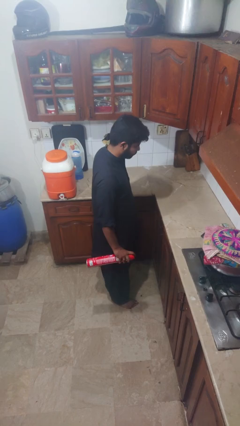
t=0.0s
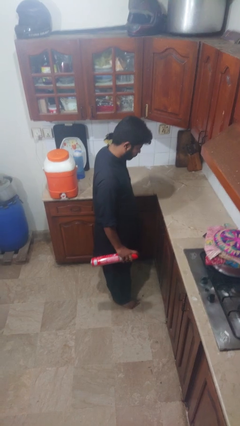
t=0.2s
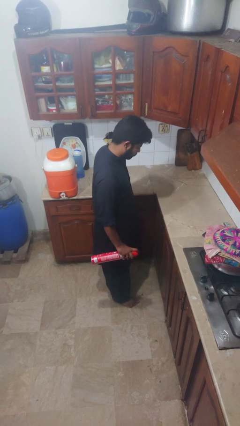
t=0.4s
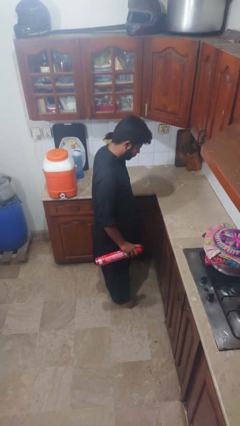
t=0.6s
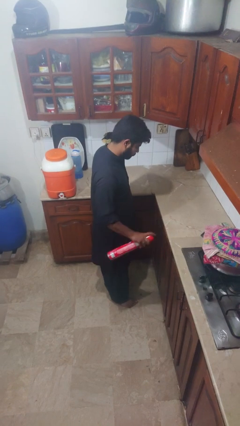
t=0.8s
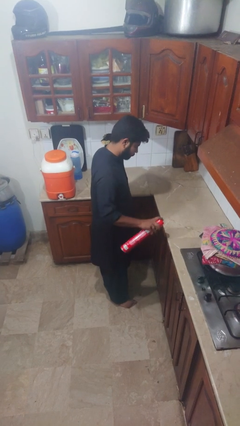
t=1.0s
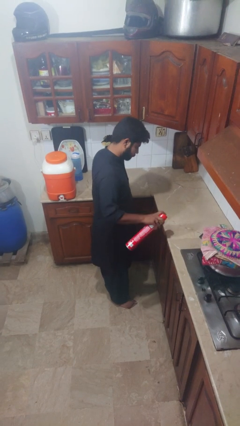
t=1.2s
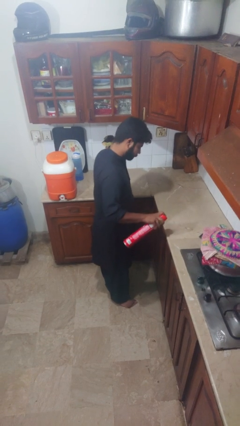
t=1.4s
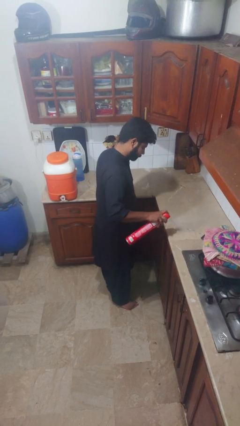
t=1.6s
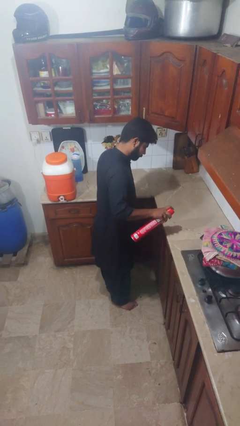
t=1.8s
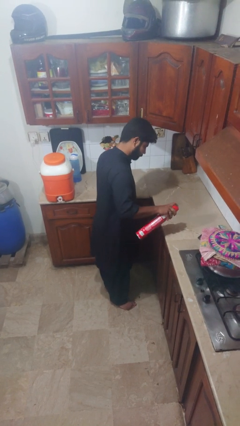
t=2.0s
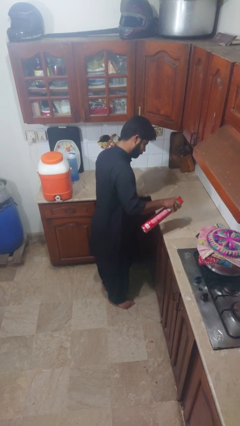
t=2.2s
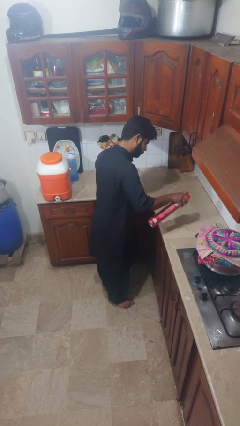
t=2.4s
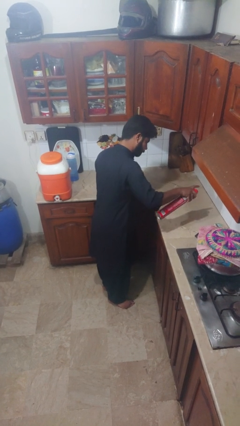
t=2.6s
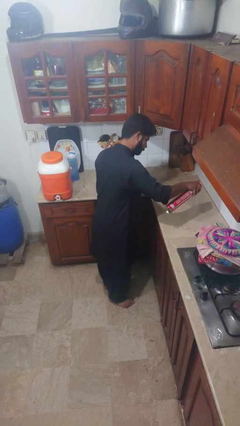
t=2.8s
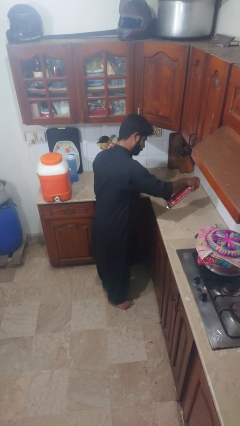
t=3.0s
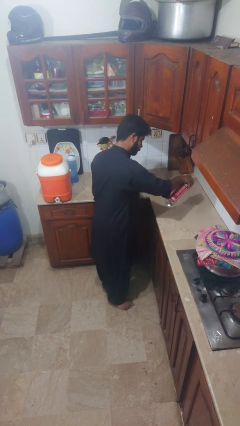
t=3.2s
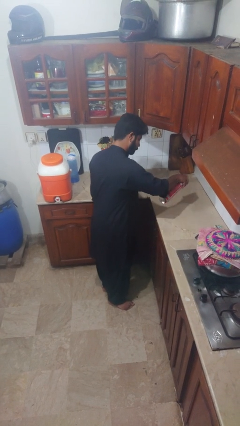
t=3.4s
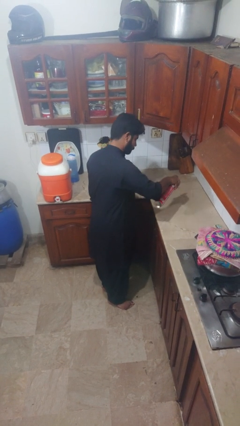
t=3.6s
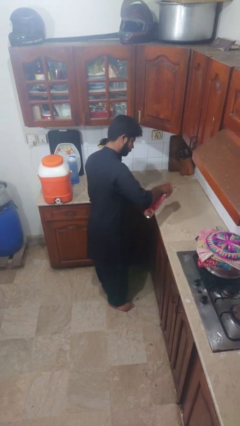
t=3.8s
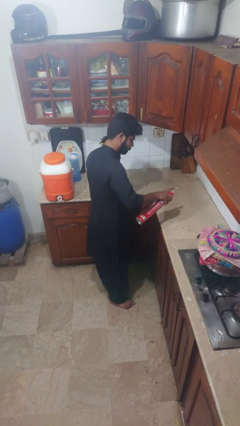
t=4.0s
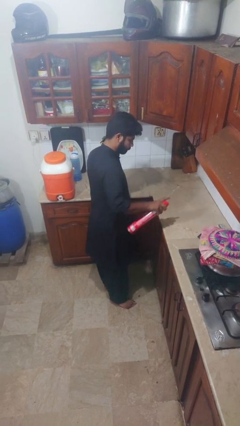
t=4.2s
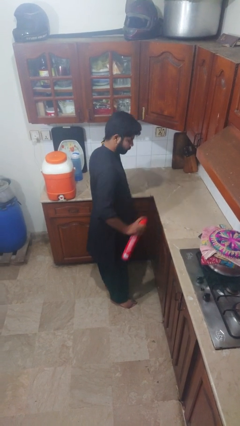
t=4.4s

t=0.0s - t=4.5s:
person sprays from bottle

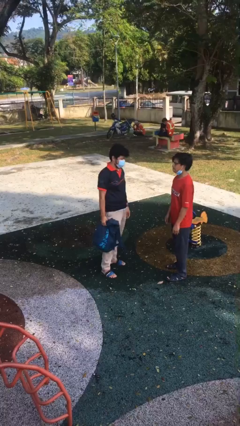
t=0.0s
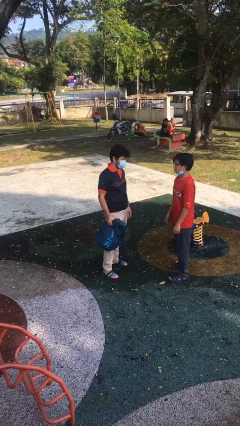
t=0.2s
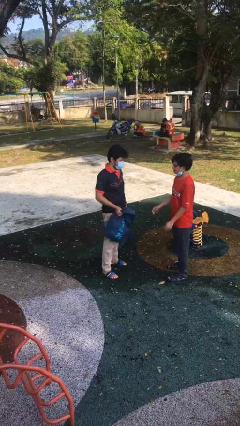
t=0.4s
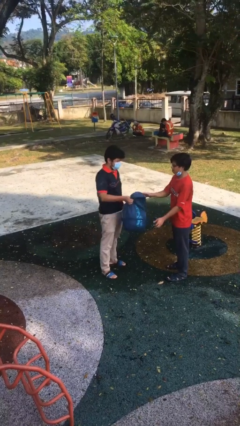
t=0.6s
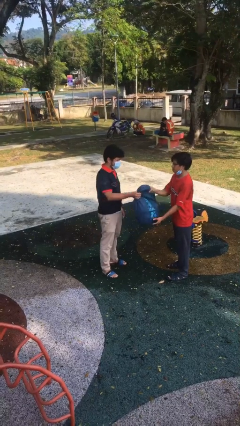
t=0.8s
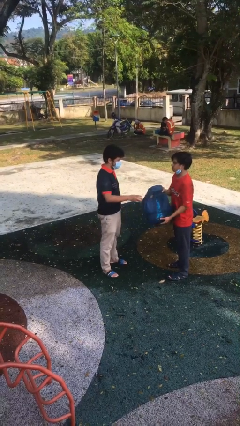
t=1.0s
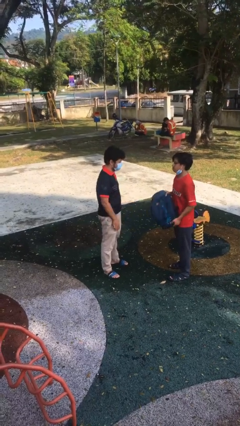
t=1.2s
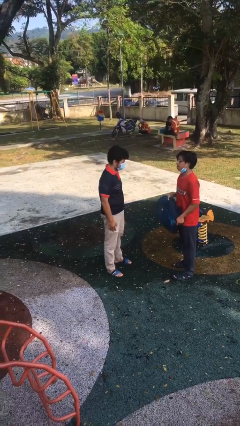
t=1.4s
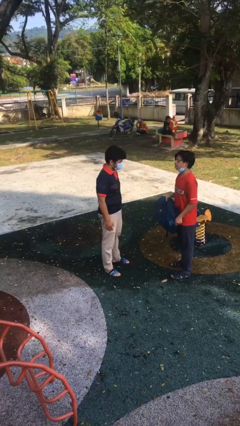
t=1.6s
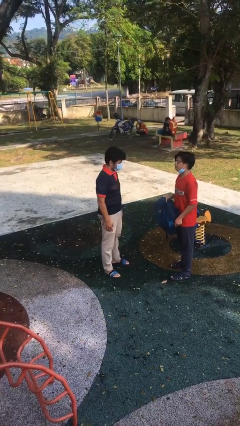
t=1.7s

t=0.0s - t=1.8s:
person transfers object to person

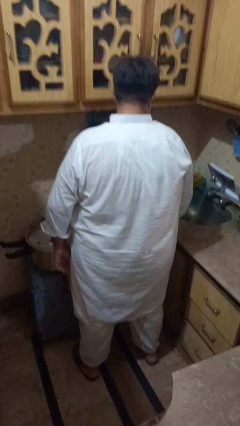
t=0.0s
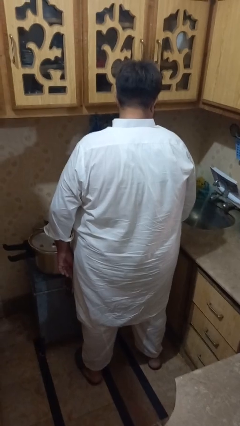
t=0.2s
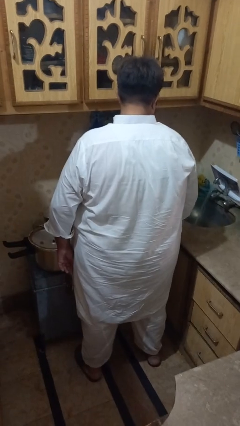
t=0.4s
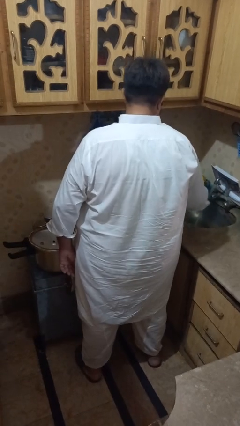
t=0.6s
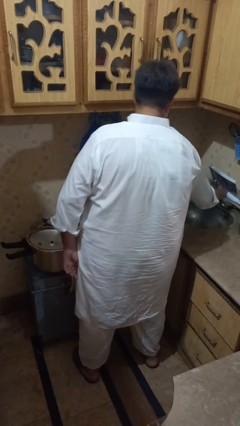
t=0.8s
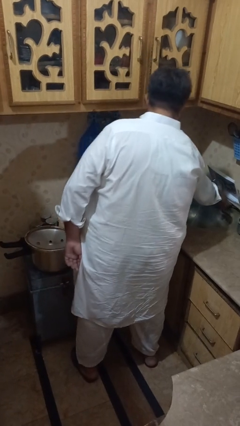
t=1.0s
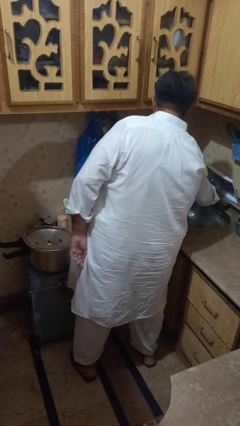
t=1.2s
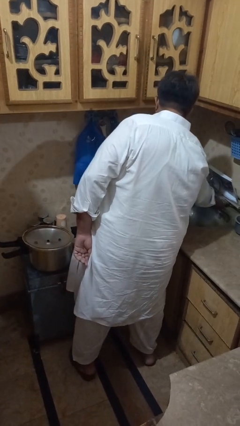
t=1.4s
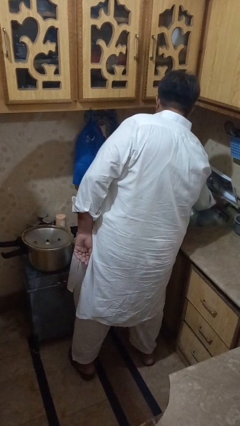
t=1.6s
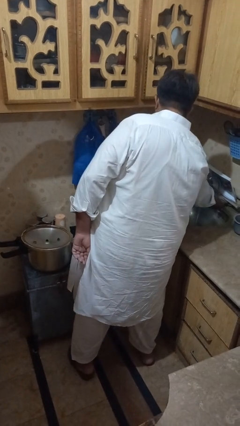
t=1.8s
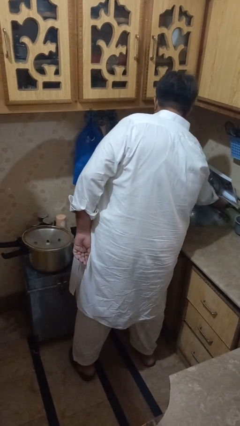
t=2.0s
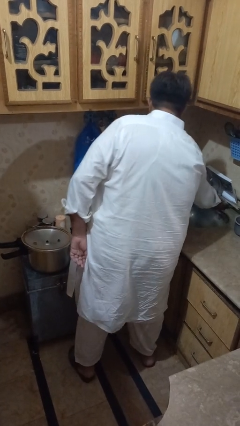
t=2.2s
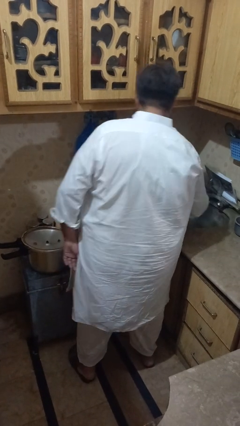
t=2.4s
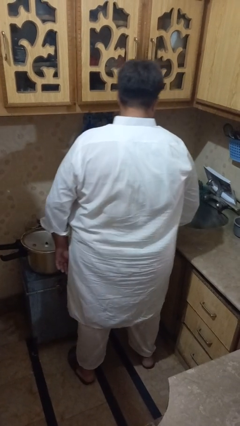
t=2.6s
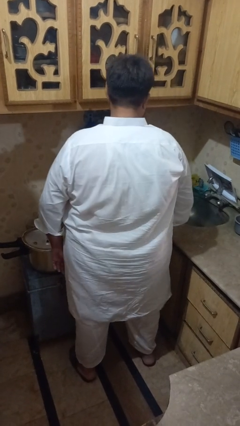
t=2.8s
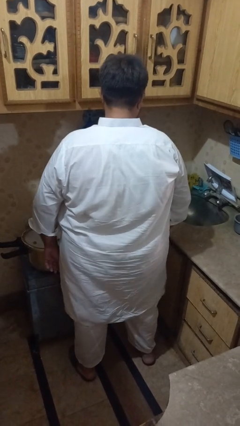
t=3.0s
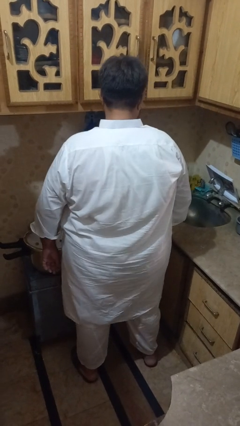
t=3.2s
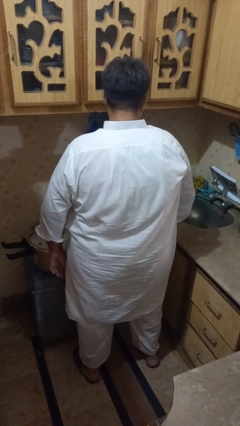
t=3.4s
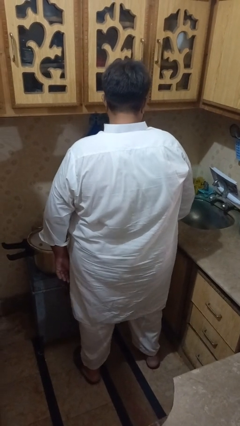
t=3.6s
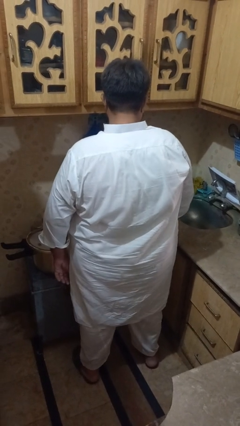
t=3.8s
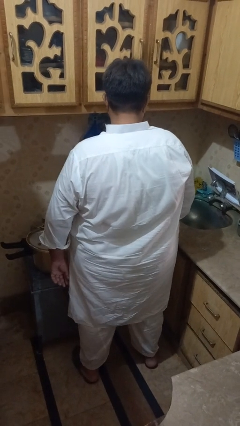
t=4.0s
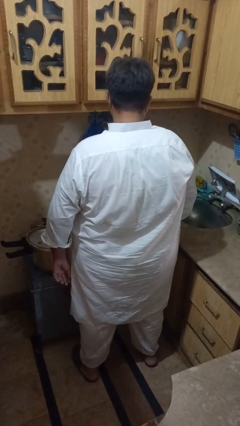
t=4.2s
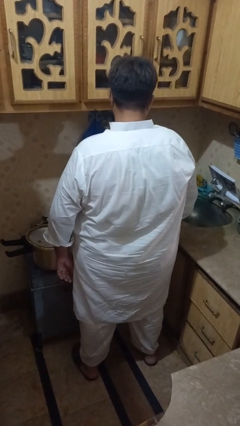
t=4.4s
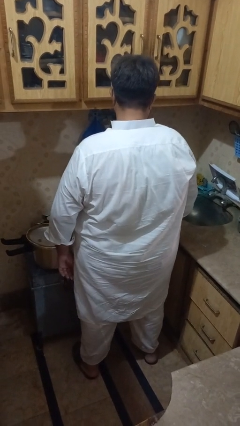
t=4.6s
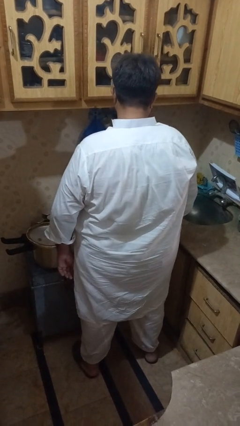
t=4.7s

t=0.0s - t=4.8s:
person turns off faucet

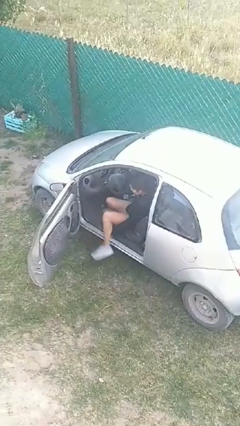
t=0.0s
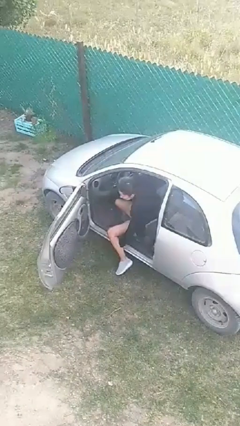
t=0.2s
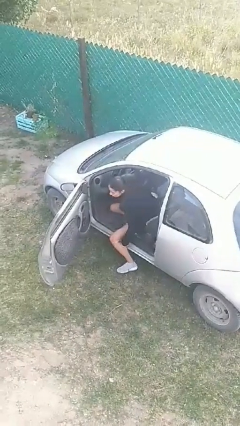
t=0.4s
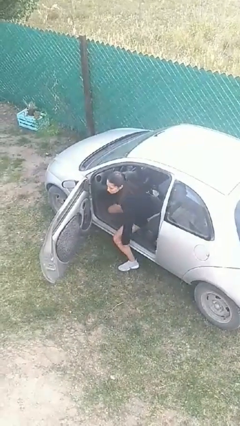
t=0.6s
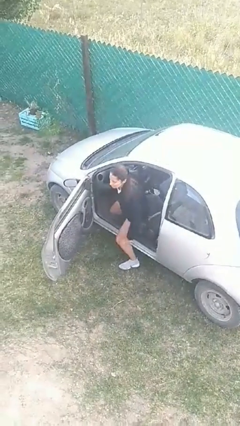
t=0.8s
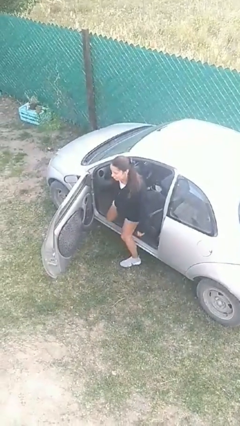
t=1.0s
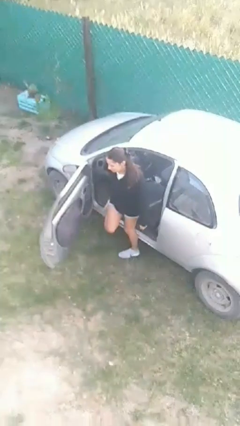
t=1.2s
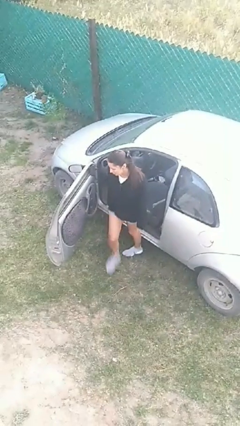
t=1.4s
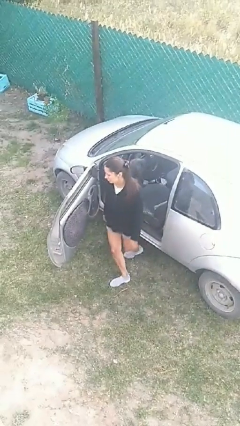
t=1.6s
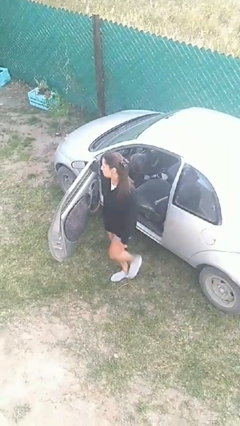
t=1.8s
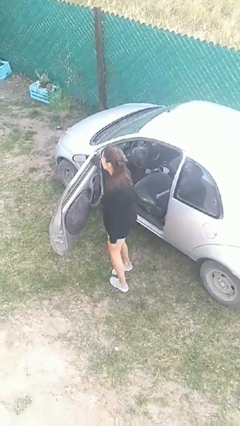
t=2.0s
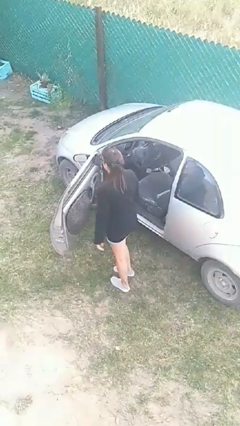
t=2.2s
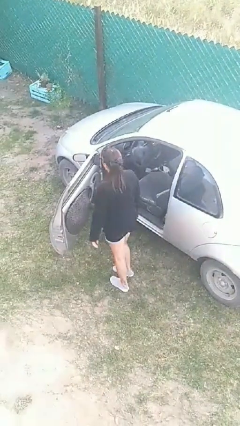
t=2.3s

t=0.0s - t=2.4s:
person exits car

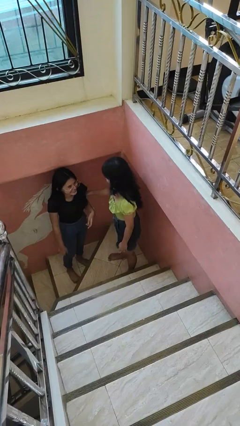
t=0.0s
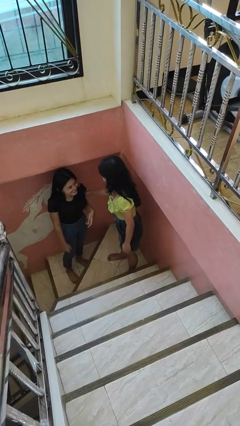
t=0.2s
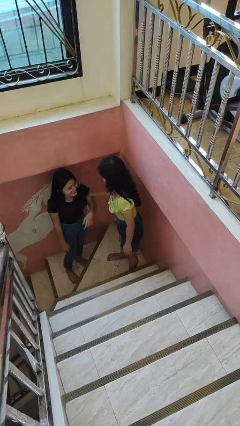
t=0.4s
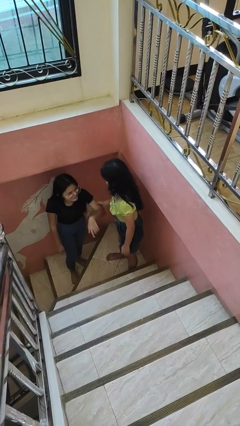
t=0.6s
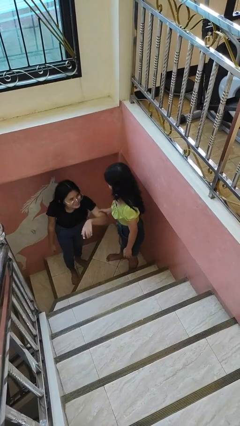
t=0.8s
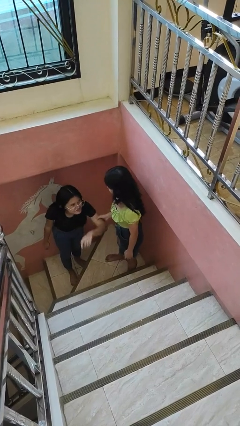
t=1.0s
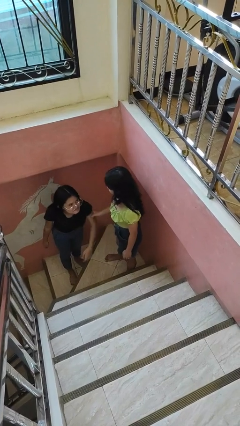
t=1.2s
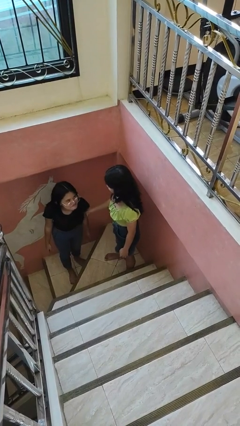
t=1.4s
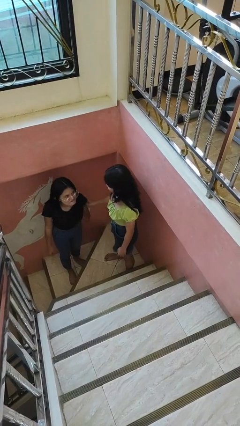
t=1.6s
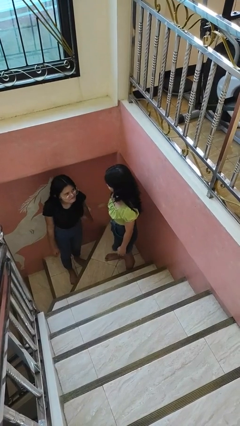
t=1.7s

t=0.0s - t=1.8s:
person grabs person by bicep

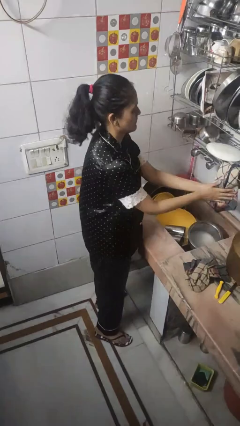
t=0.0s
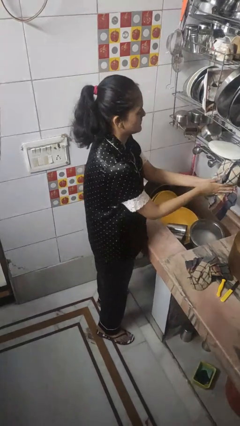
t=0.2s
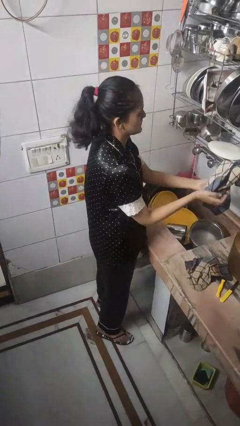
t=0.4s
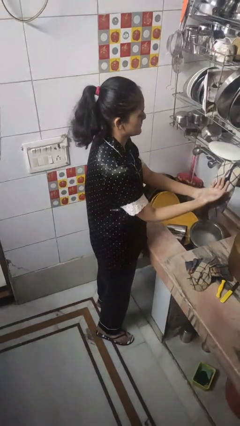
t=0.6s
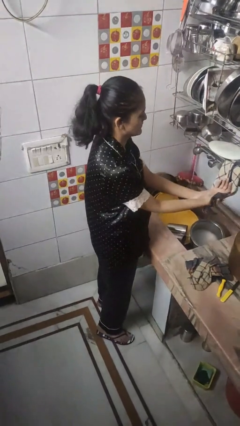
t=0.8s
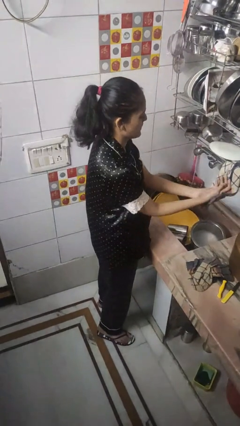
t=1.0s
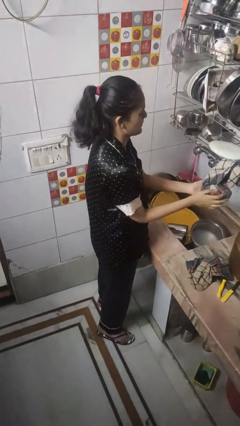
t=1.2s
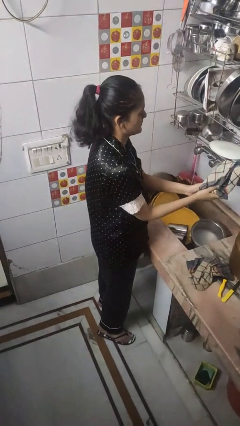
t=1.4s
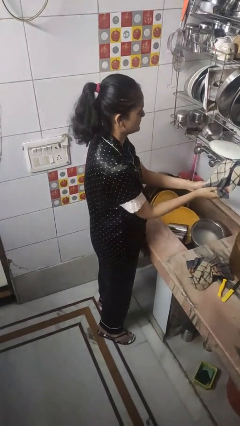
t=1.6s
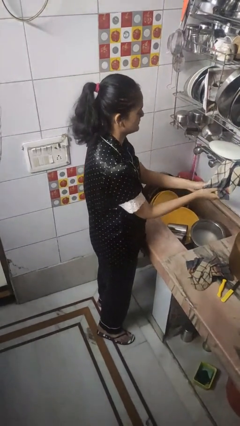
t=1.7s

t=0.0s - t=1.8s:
person dries hands with towel

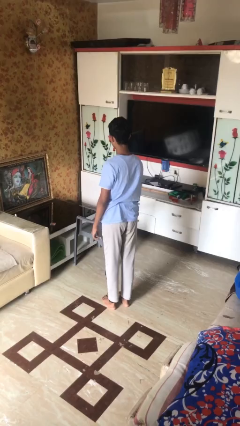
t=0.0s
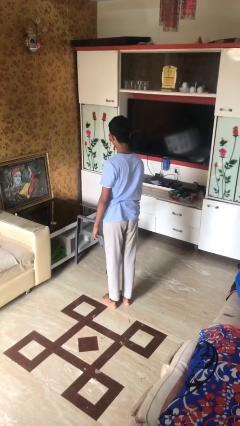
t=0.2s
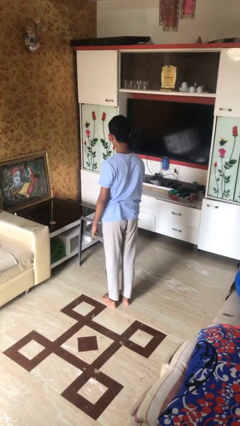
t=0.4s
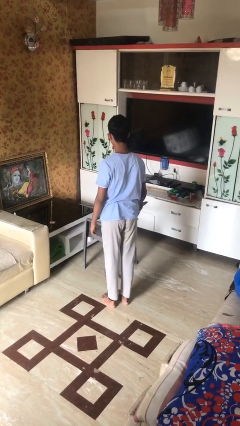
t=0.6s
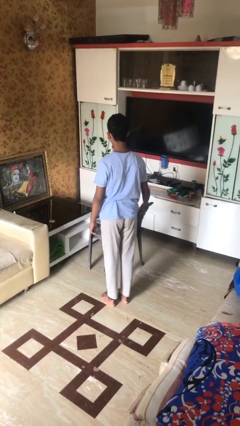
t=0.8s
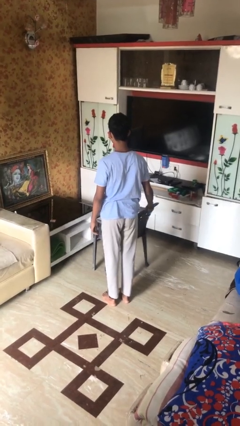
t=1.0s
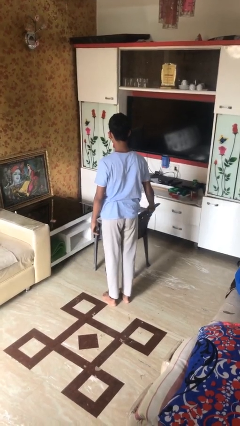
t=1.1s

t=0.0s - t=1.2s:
person pulls out chair
